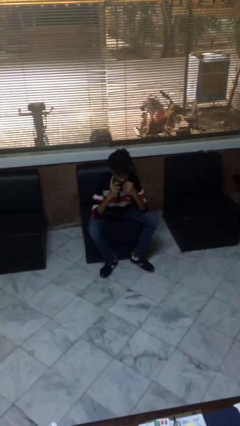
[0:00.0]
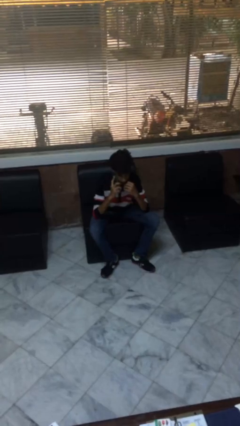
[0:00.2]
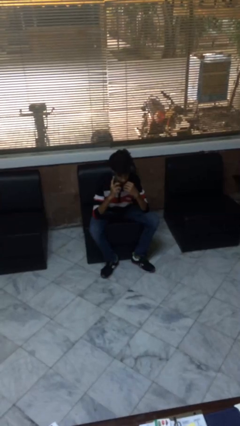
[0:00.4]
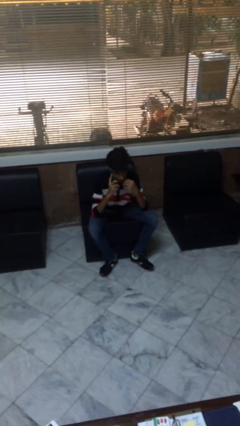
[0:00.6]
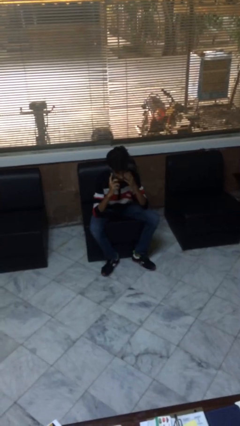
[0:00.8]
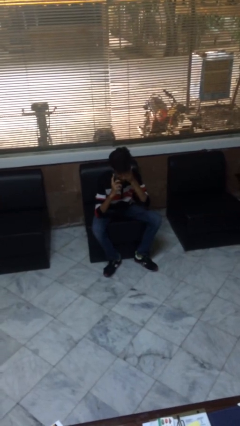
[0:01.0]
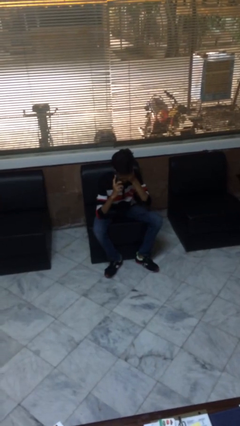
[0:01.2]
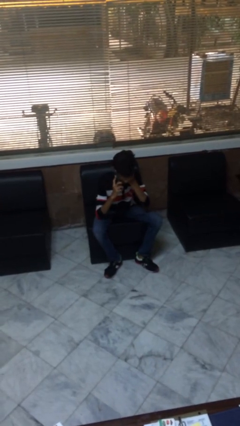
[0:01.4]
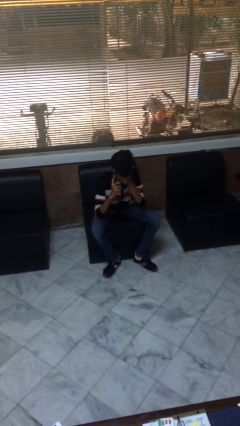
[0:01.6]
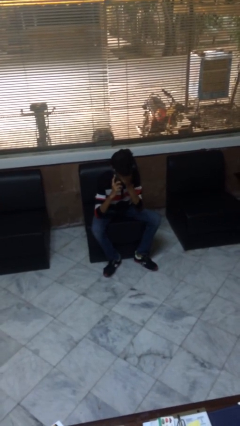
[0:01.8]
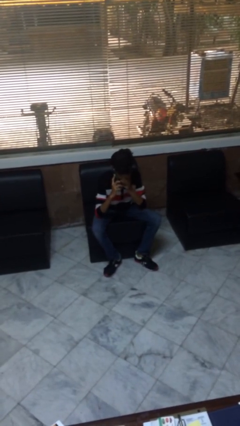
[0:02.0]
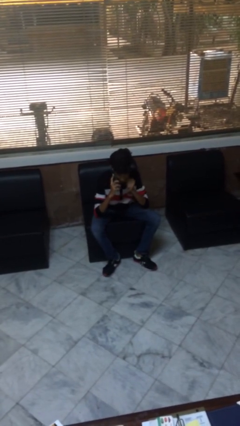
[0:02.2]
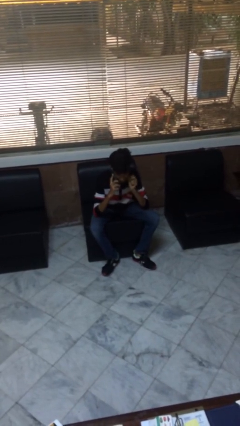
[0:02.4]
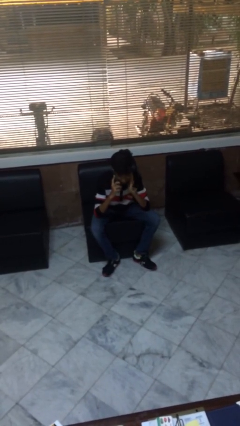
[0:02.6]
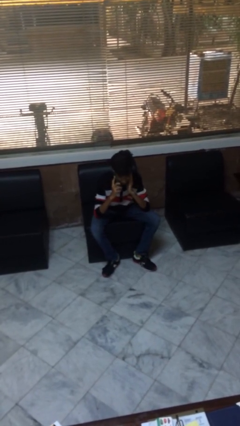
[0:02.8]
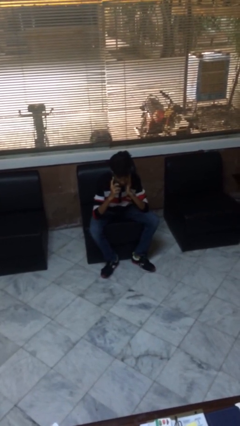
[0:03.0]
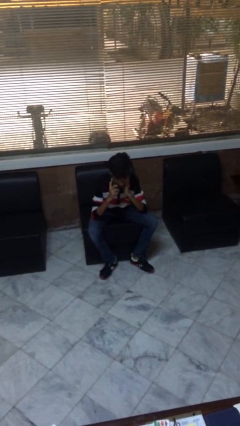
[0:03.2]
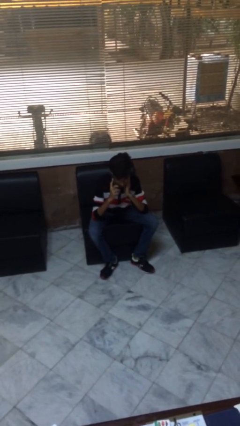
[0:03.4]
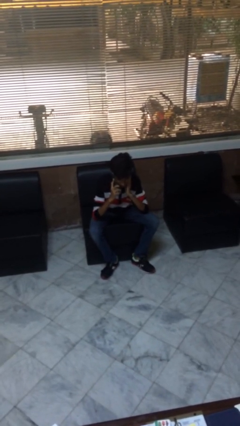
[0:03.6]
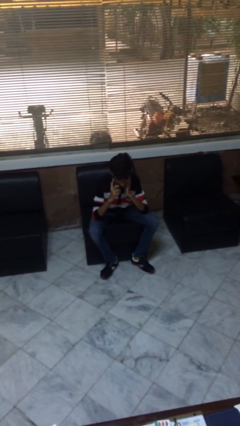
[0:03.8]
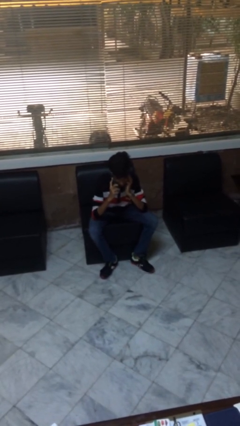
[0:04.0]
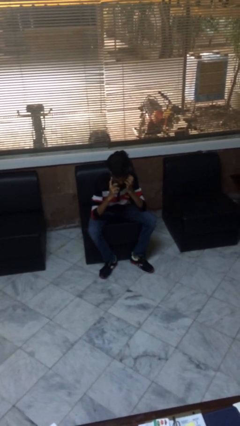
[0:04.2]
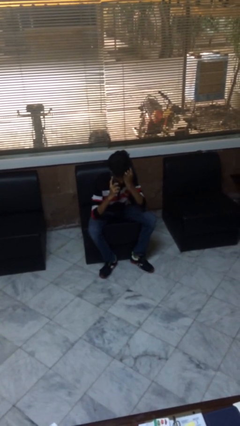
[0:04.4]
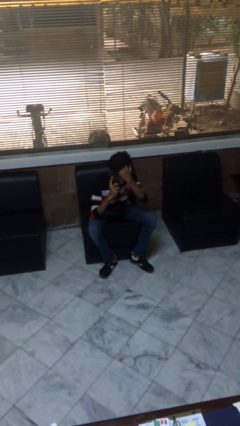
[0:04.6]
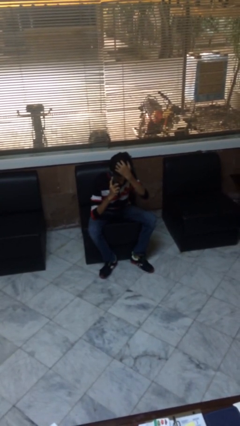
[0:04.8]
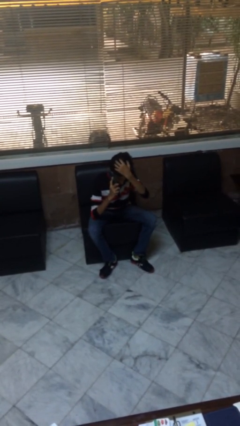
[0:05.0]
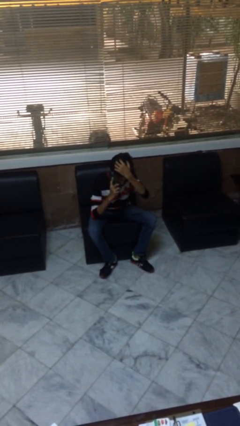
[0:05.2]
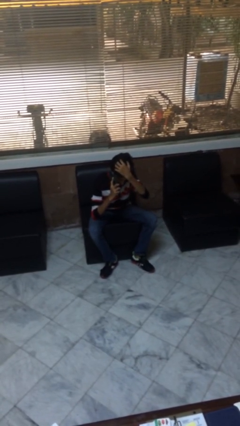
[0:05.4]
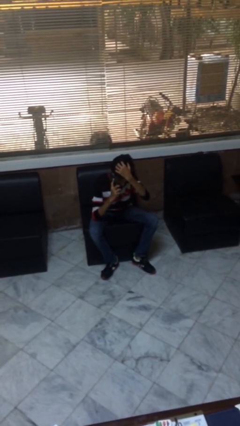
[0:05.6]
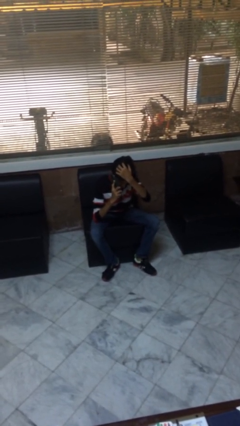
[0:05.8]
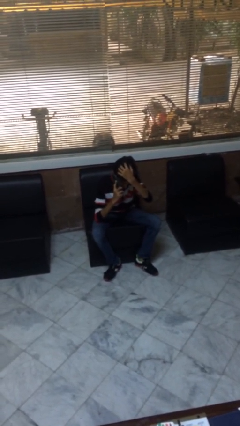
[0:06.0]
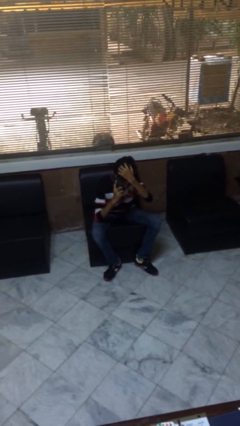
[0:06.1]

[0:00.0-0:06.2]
person talks on phone

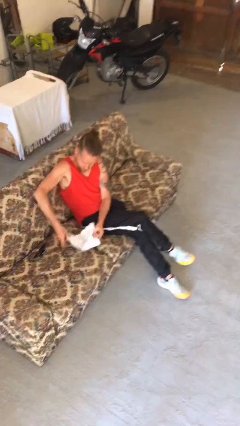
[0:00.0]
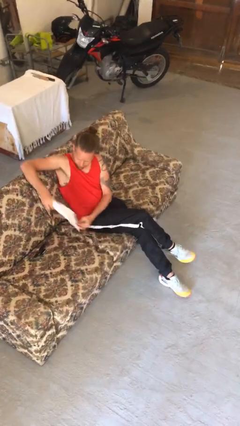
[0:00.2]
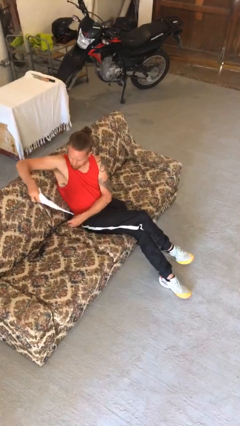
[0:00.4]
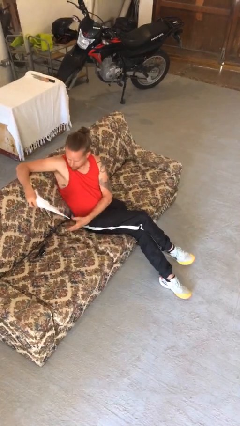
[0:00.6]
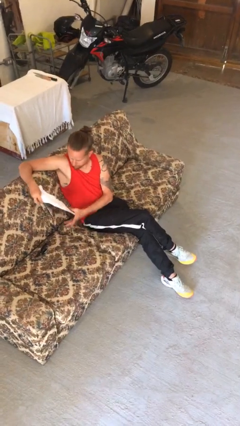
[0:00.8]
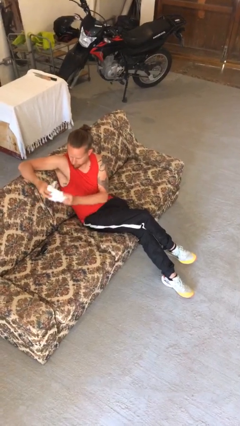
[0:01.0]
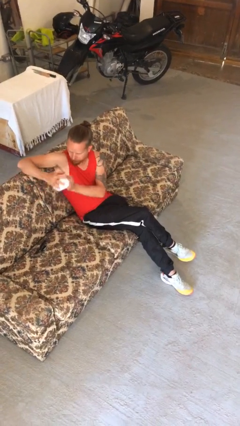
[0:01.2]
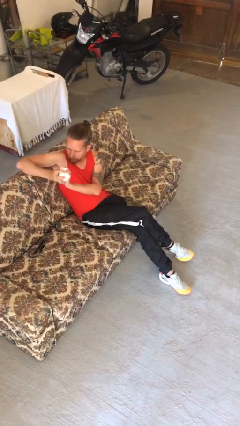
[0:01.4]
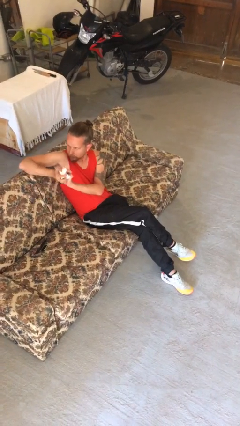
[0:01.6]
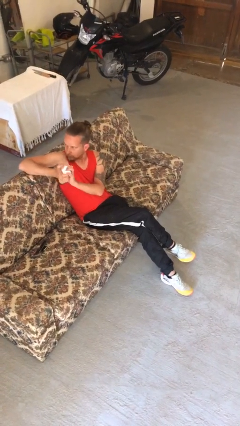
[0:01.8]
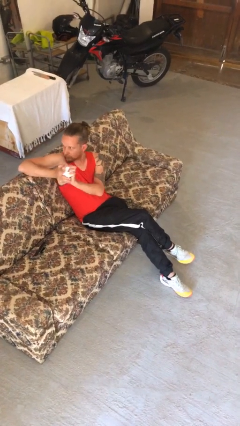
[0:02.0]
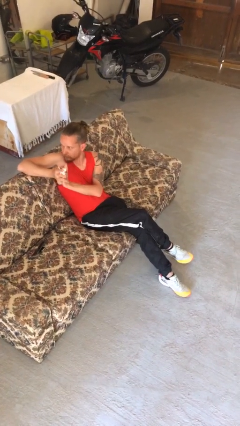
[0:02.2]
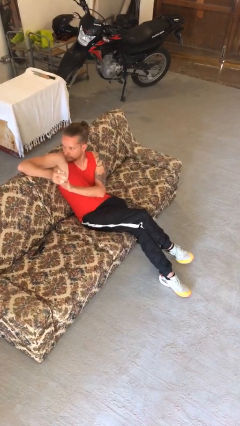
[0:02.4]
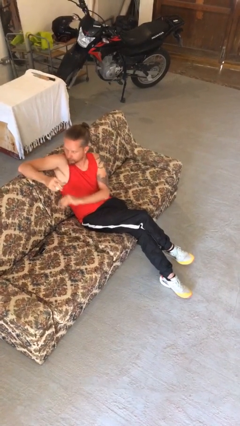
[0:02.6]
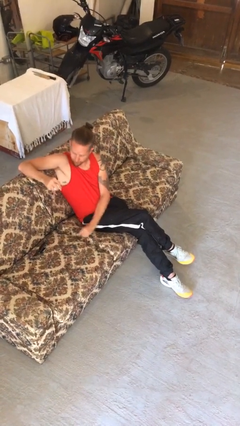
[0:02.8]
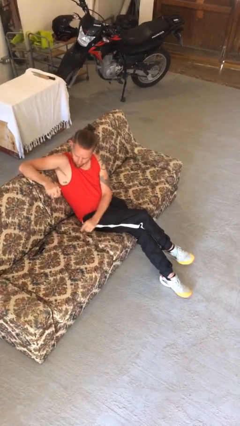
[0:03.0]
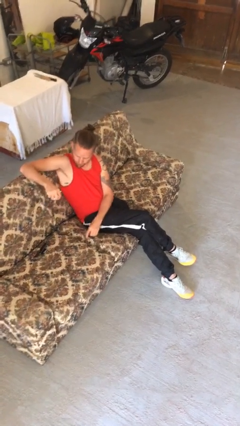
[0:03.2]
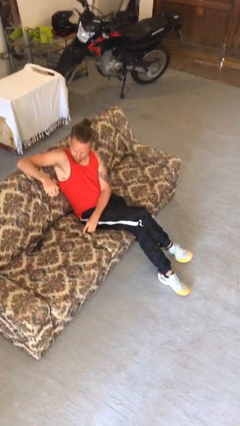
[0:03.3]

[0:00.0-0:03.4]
person crumples paper

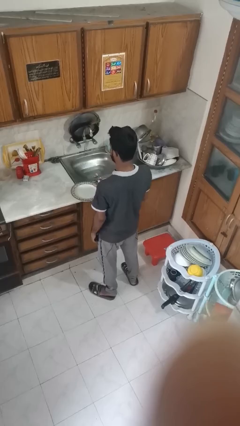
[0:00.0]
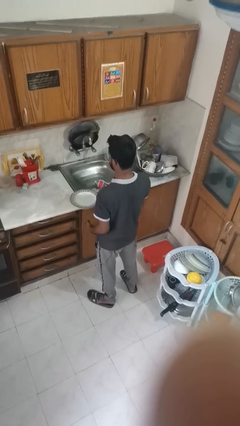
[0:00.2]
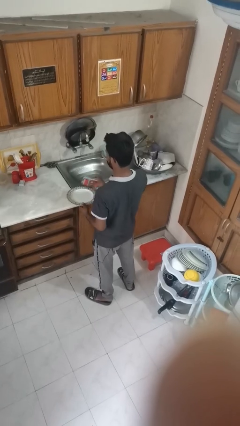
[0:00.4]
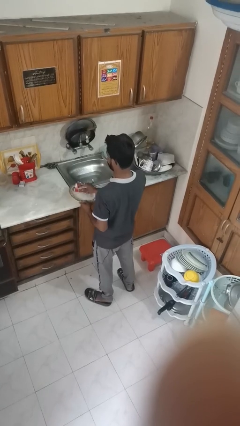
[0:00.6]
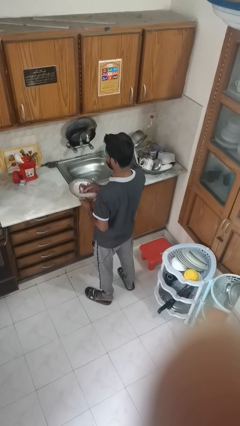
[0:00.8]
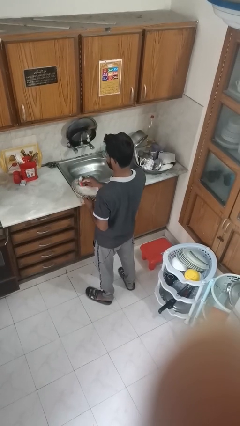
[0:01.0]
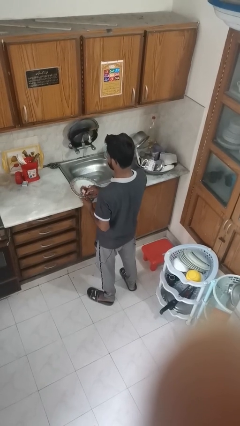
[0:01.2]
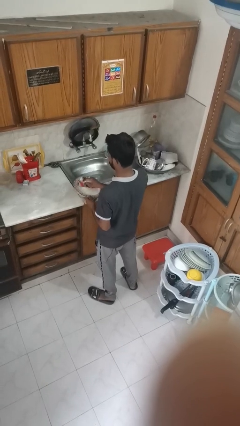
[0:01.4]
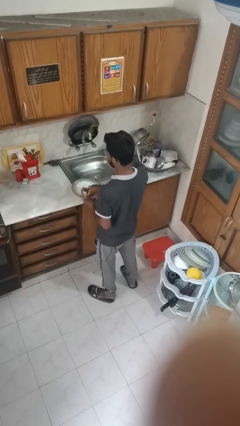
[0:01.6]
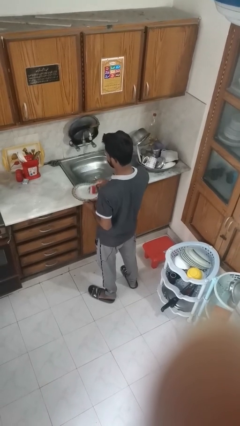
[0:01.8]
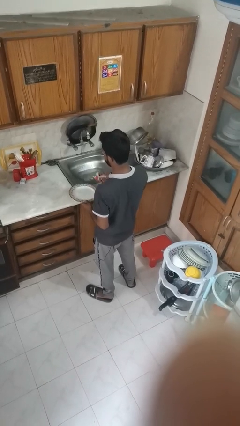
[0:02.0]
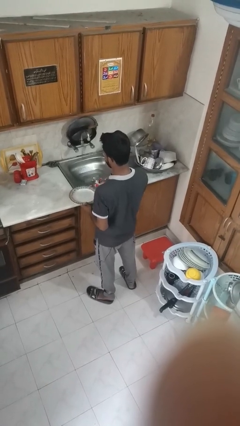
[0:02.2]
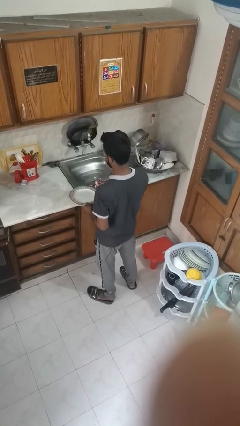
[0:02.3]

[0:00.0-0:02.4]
person dries dish

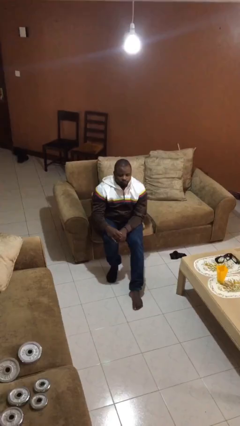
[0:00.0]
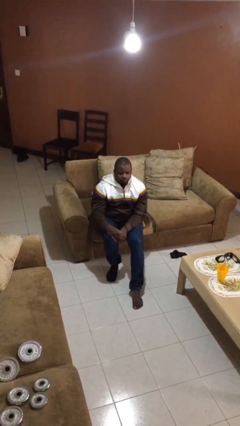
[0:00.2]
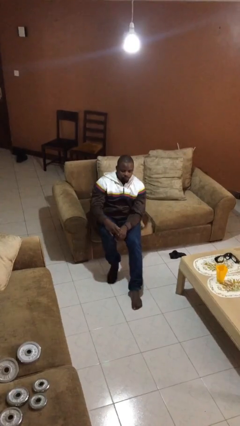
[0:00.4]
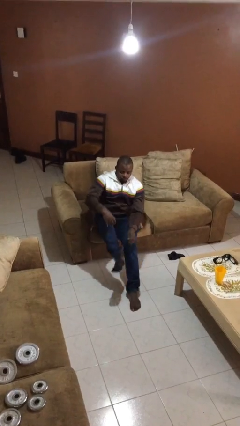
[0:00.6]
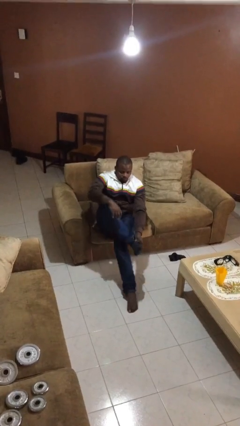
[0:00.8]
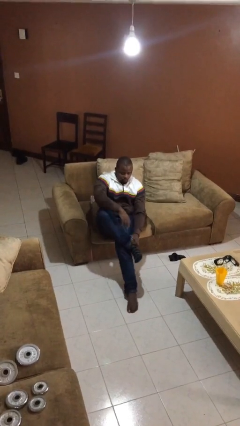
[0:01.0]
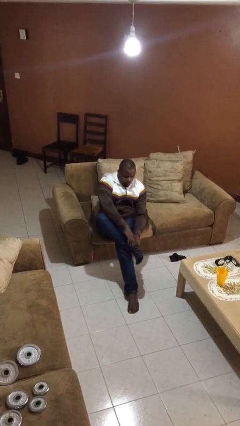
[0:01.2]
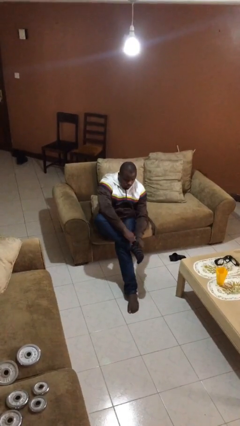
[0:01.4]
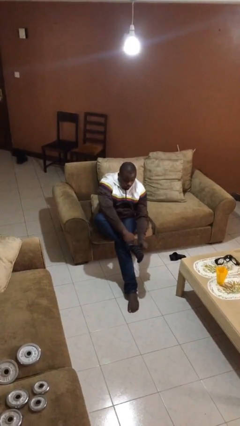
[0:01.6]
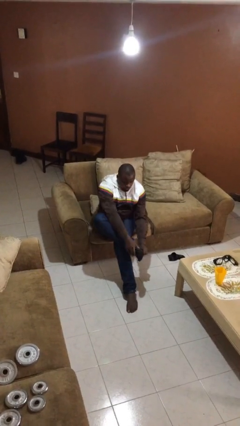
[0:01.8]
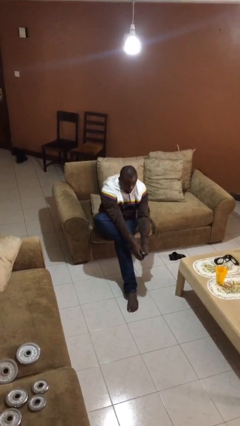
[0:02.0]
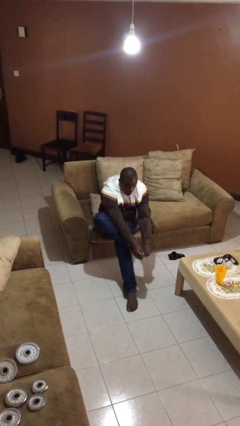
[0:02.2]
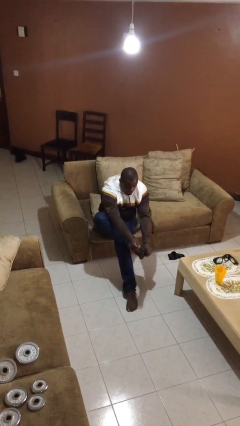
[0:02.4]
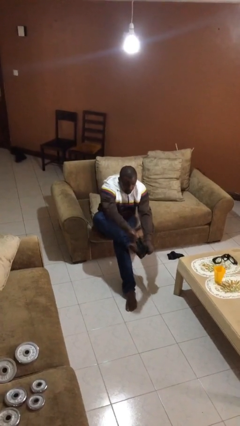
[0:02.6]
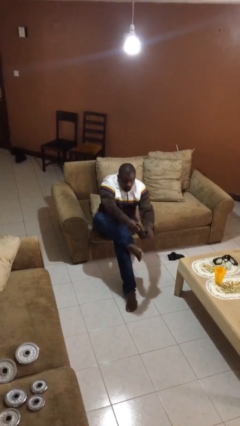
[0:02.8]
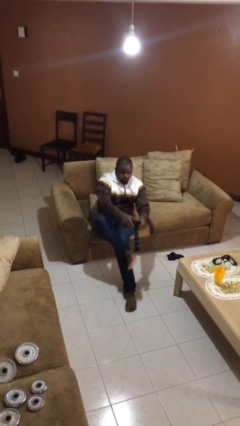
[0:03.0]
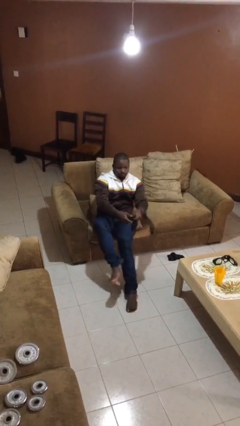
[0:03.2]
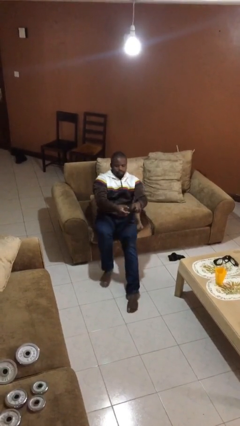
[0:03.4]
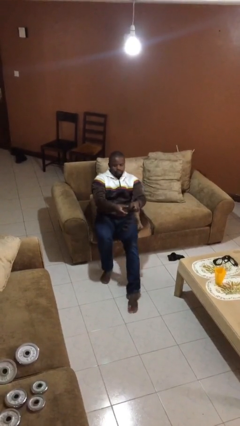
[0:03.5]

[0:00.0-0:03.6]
person takes off socks

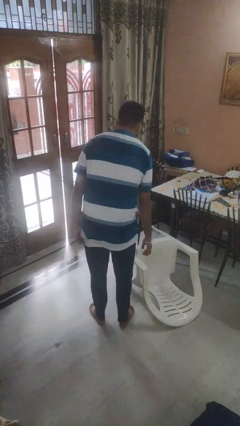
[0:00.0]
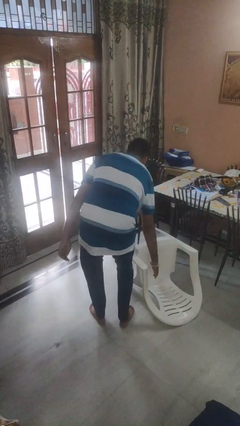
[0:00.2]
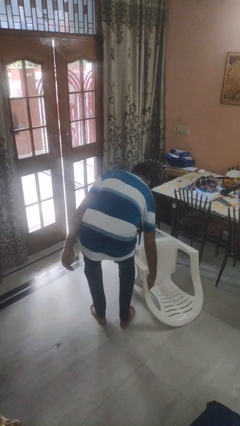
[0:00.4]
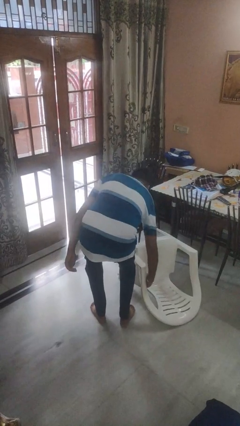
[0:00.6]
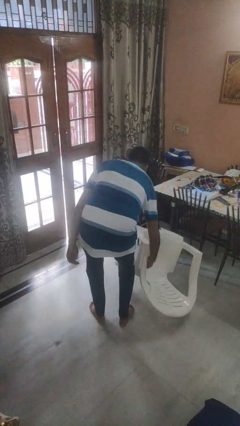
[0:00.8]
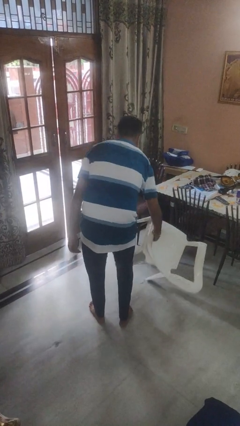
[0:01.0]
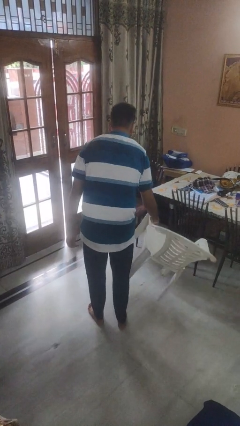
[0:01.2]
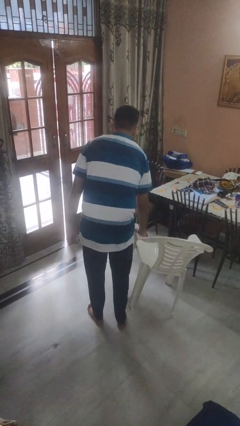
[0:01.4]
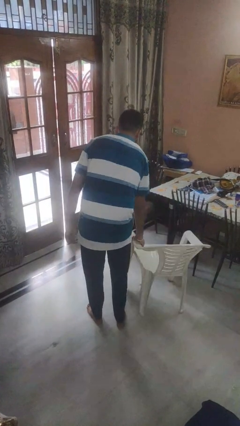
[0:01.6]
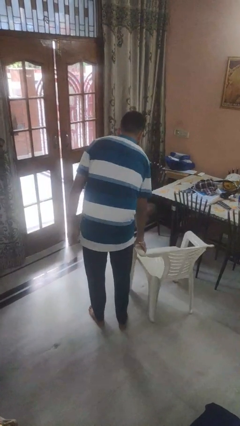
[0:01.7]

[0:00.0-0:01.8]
person sets upright furniture
